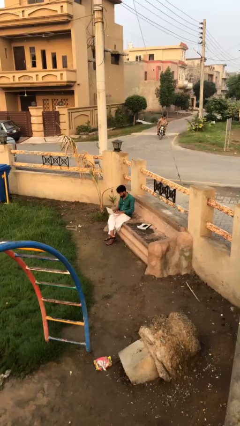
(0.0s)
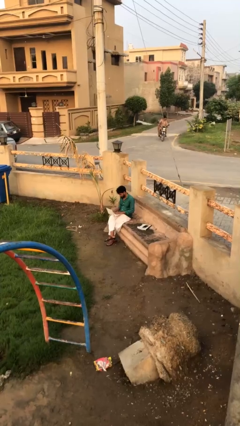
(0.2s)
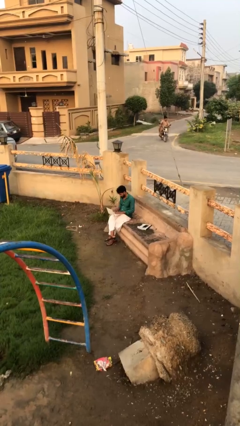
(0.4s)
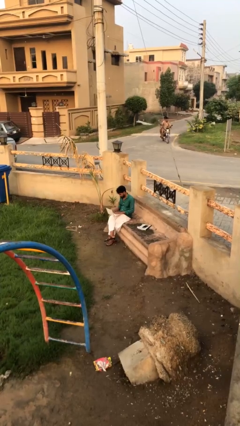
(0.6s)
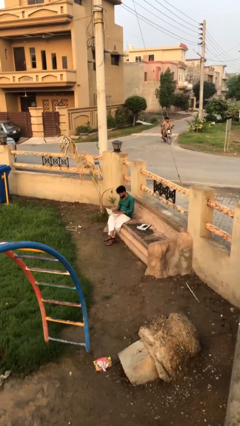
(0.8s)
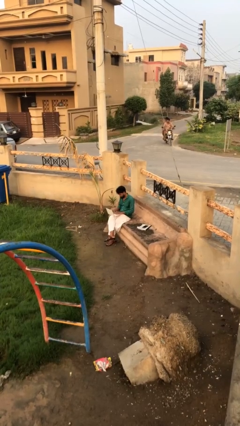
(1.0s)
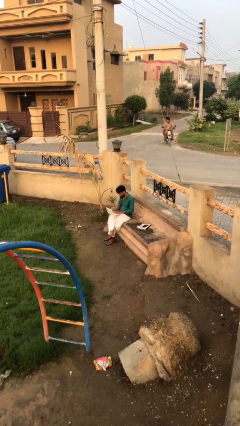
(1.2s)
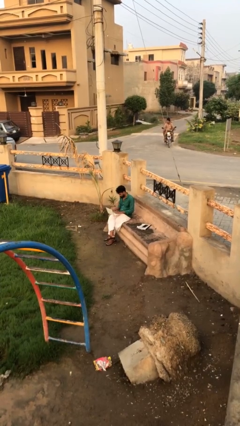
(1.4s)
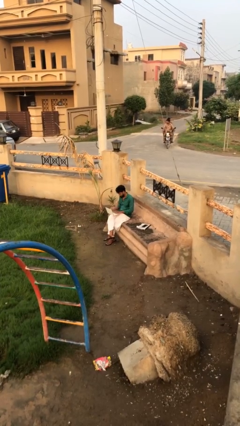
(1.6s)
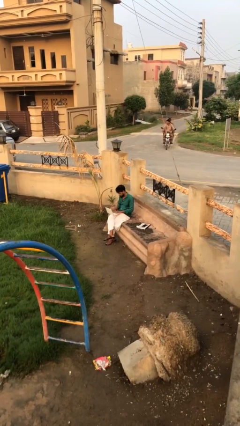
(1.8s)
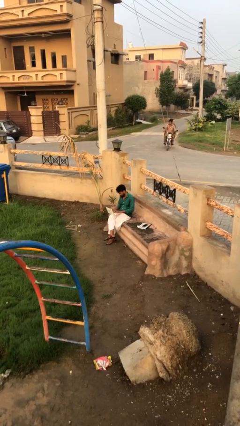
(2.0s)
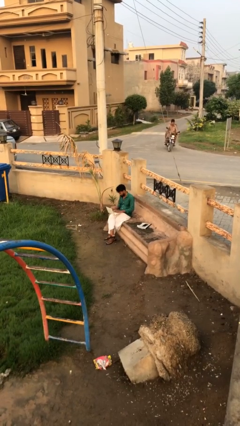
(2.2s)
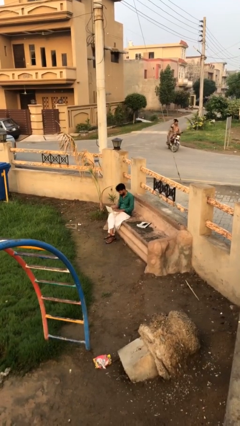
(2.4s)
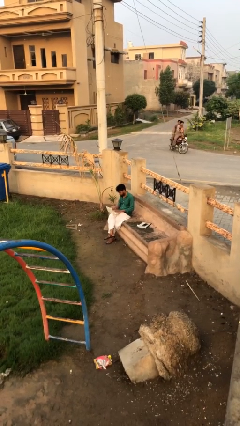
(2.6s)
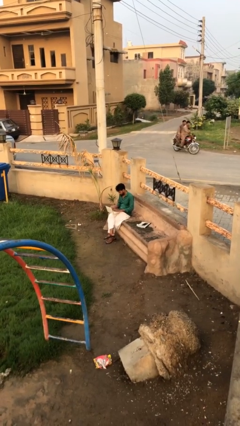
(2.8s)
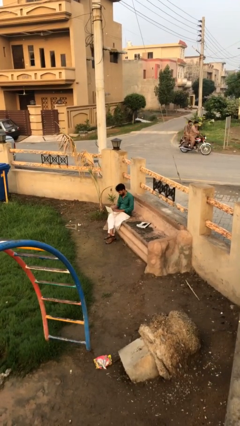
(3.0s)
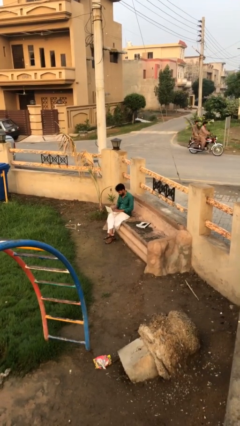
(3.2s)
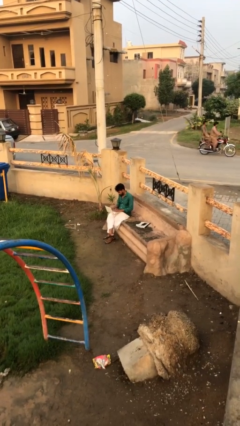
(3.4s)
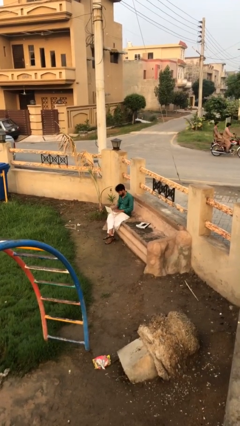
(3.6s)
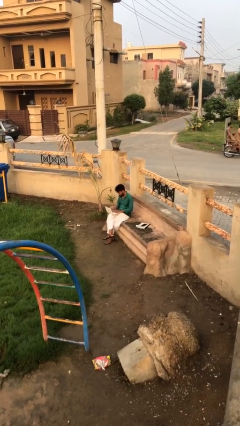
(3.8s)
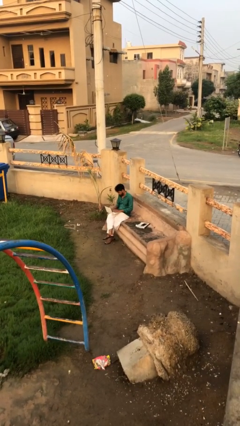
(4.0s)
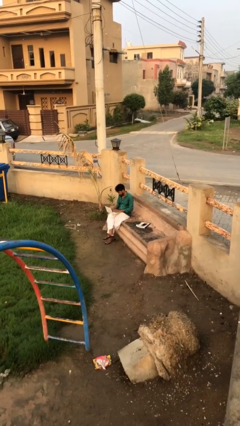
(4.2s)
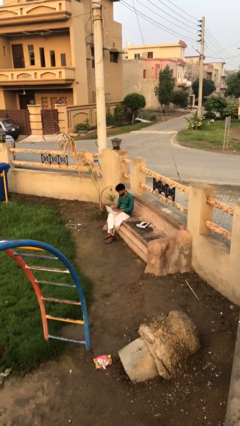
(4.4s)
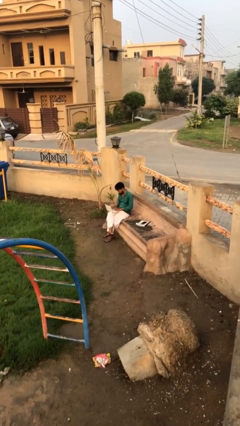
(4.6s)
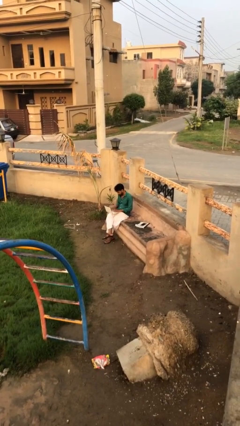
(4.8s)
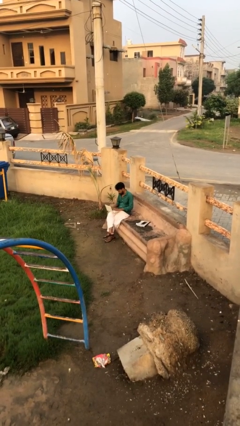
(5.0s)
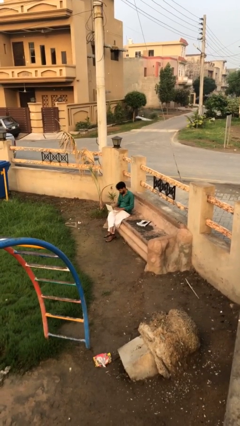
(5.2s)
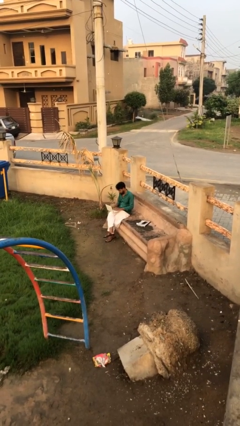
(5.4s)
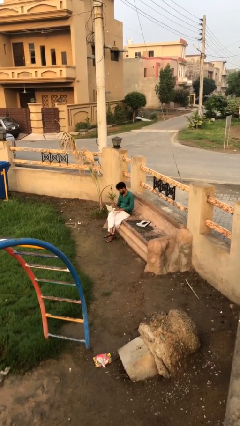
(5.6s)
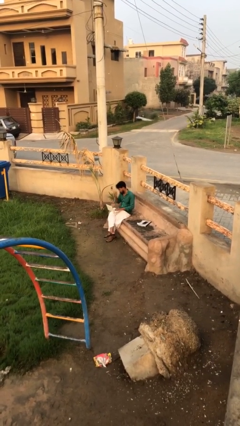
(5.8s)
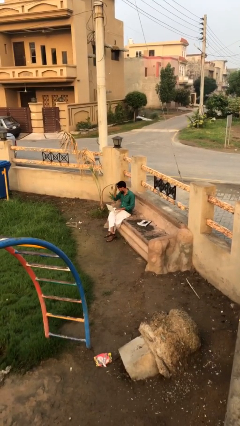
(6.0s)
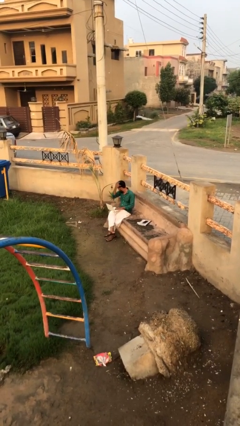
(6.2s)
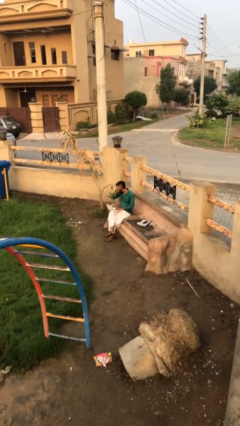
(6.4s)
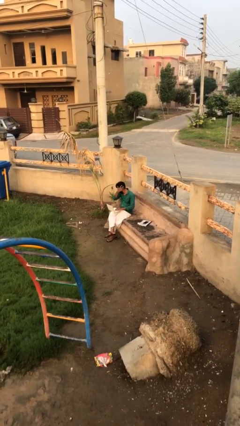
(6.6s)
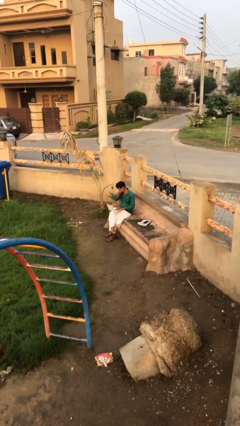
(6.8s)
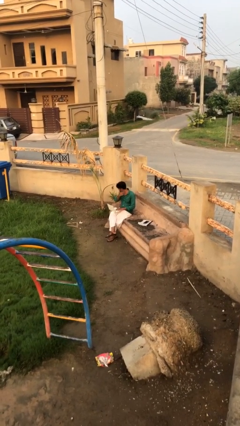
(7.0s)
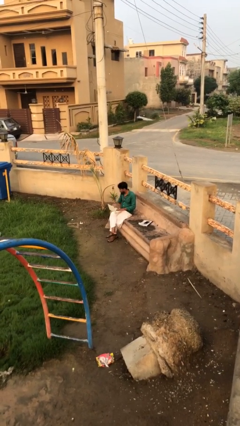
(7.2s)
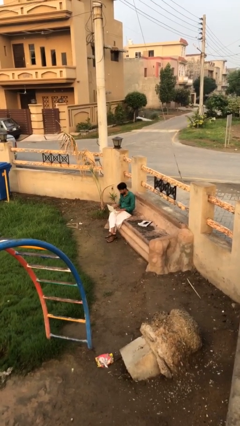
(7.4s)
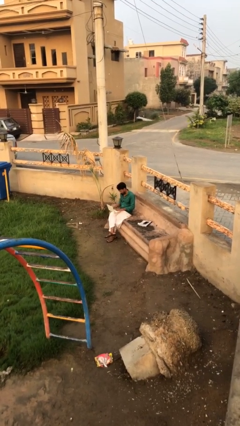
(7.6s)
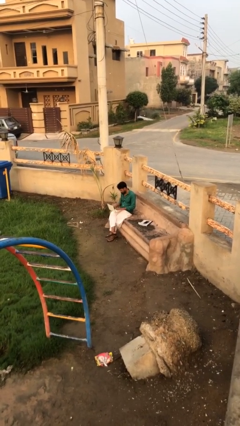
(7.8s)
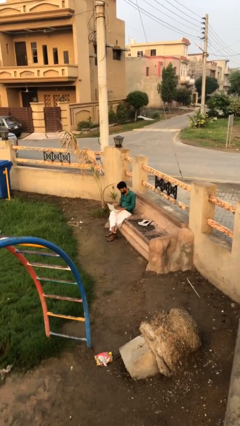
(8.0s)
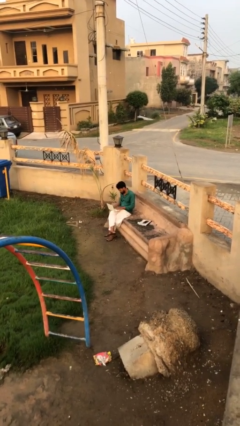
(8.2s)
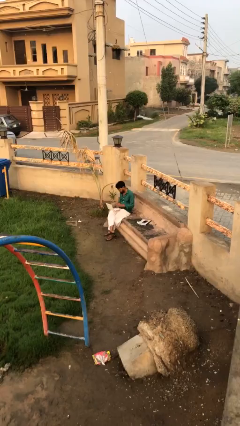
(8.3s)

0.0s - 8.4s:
person interacts with laptop

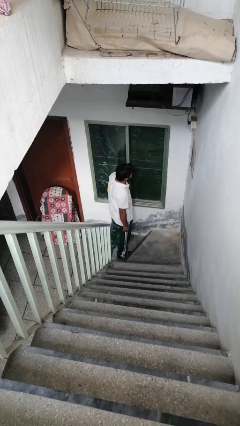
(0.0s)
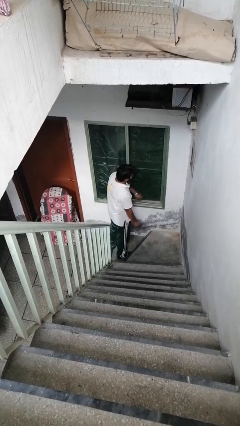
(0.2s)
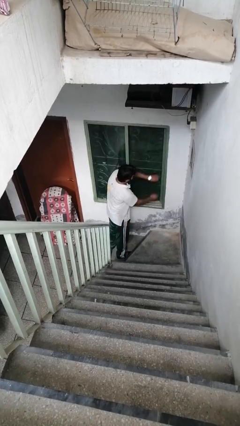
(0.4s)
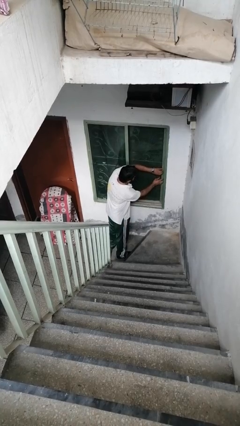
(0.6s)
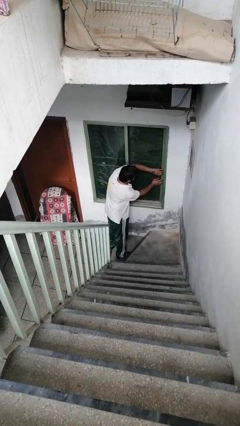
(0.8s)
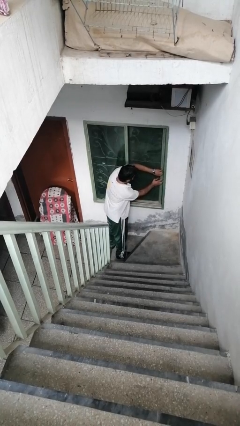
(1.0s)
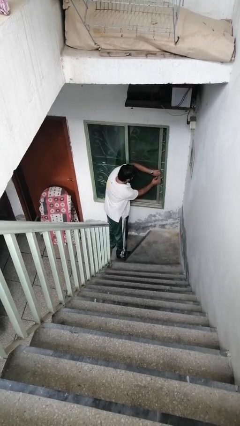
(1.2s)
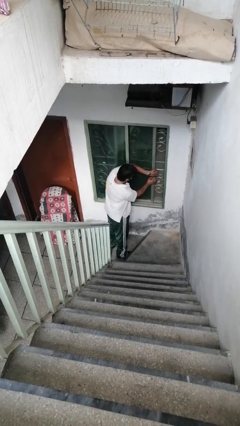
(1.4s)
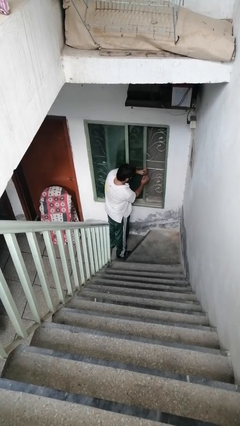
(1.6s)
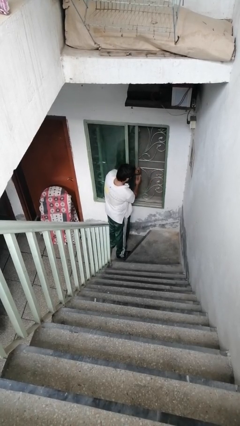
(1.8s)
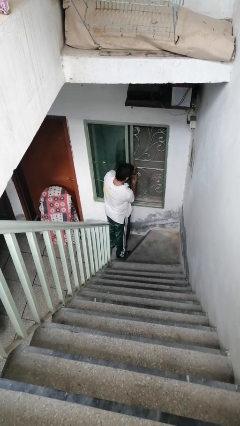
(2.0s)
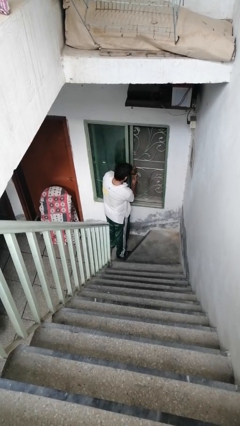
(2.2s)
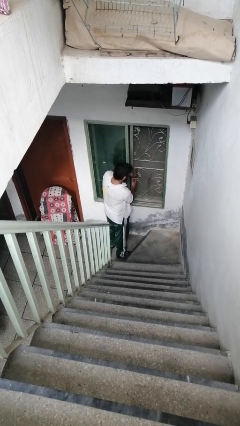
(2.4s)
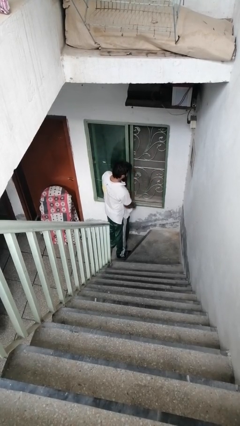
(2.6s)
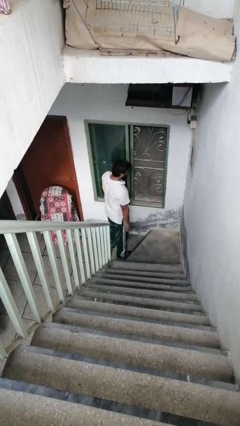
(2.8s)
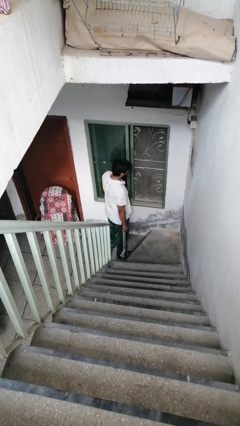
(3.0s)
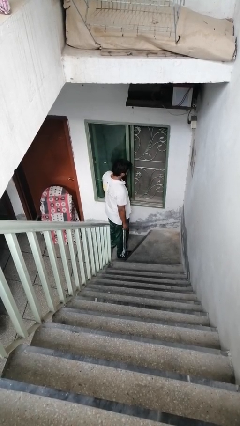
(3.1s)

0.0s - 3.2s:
person opens home window

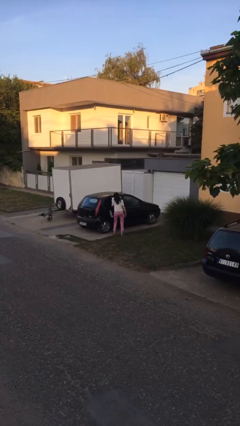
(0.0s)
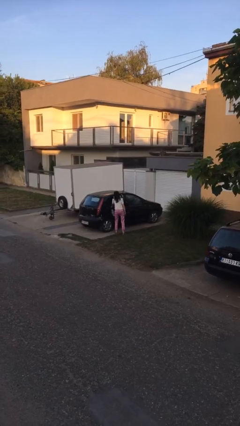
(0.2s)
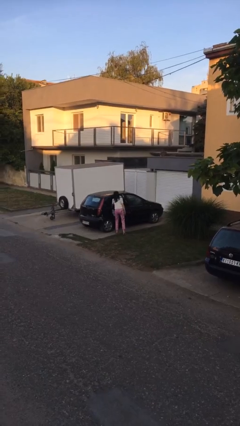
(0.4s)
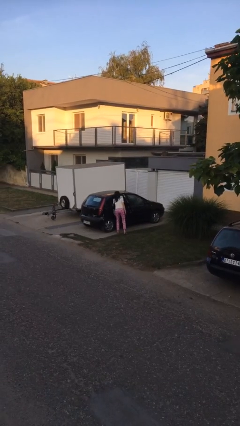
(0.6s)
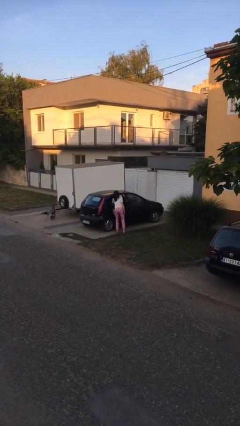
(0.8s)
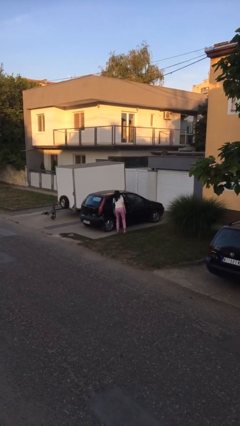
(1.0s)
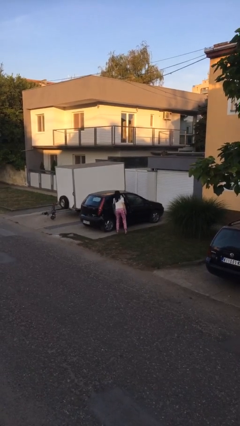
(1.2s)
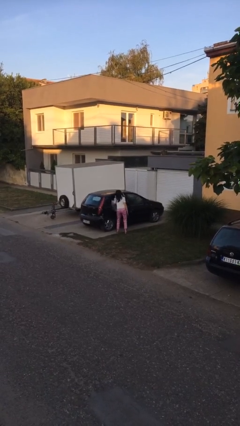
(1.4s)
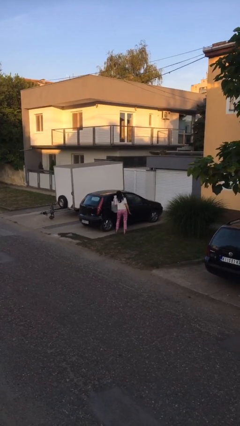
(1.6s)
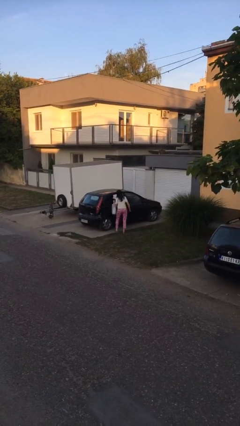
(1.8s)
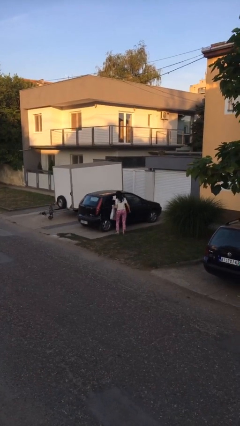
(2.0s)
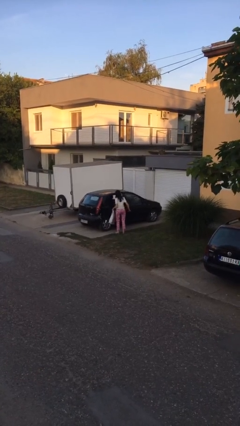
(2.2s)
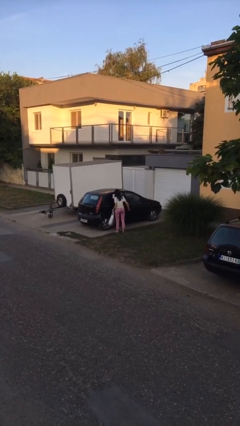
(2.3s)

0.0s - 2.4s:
person unloads car

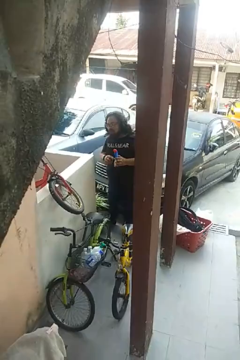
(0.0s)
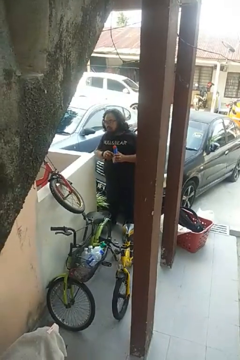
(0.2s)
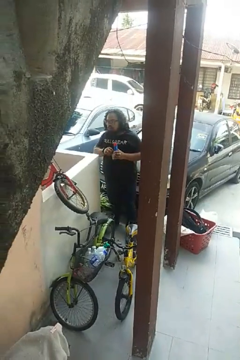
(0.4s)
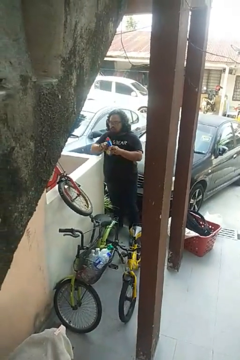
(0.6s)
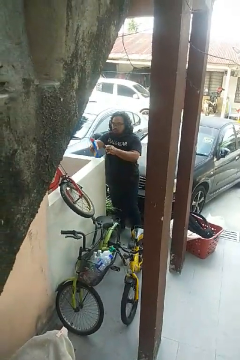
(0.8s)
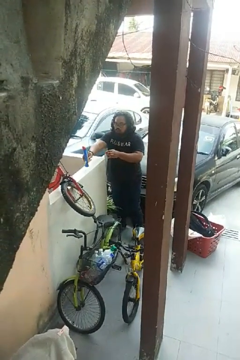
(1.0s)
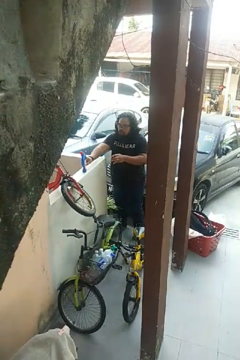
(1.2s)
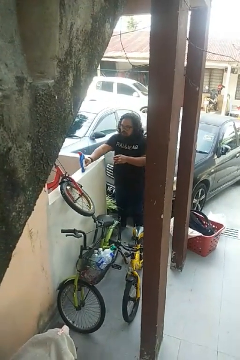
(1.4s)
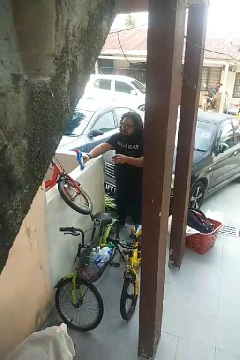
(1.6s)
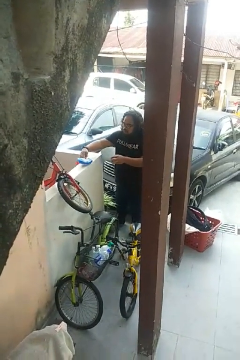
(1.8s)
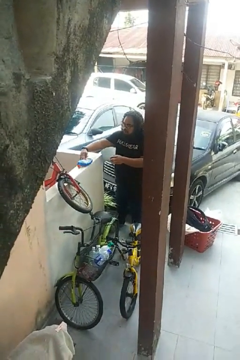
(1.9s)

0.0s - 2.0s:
person puts down object on countertop

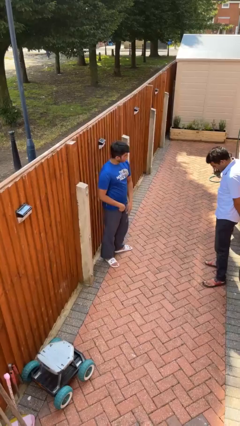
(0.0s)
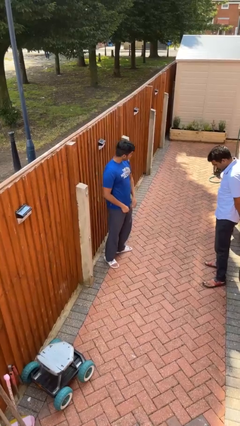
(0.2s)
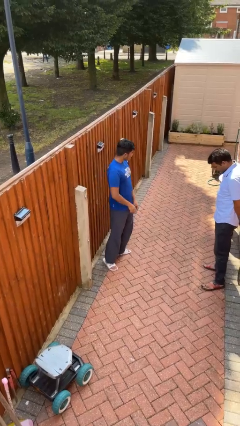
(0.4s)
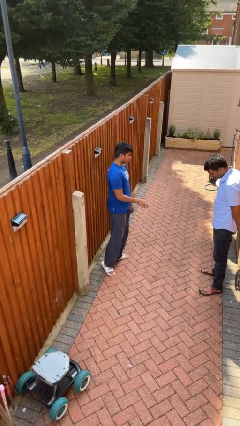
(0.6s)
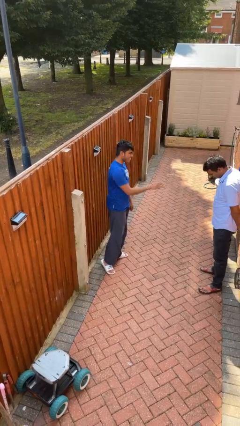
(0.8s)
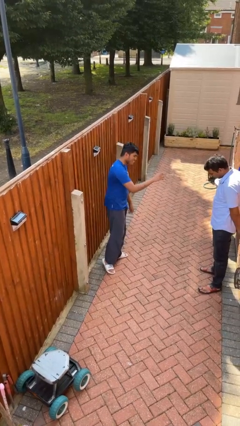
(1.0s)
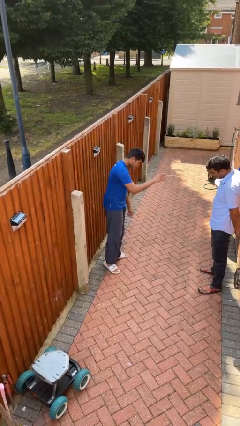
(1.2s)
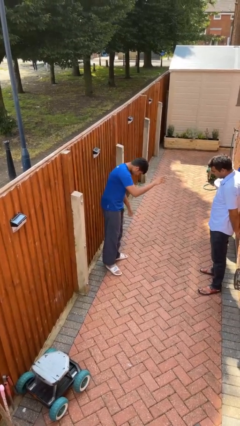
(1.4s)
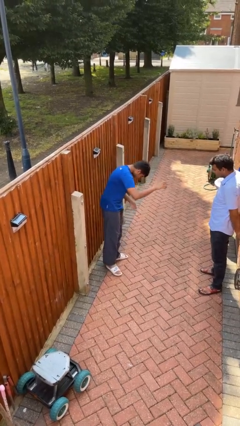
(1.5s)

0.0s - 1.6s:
person laughs with person

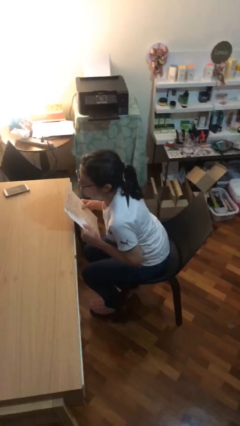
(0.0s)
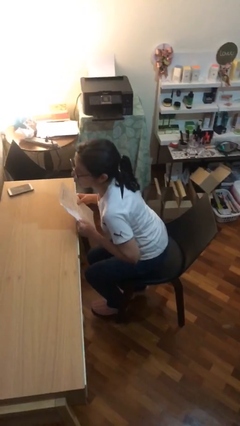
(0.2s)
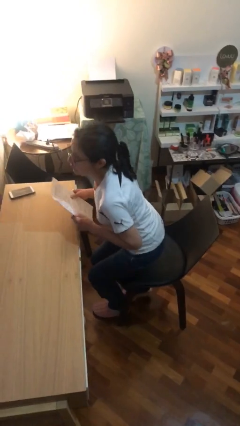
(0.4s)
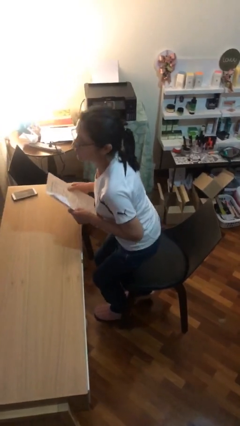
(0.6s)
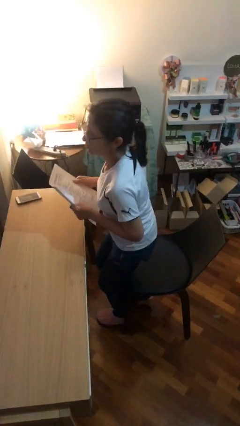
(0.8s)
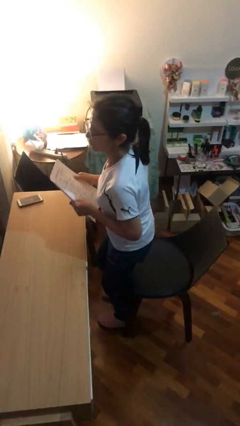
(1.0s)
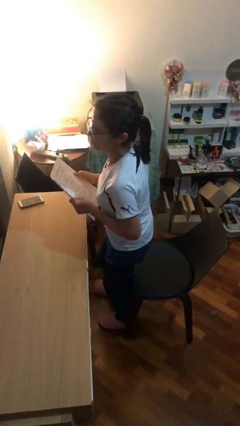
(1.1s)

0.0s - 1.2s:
person stands up
